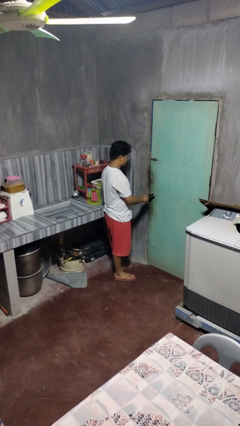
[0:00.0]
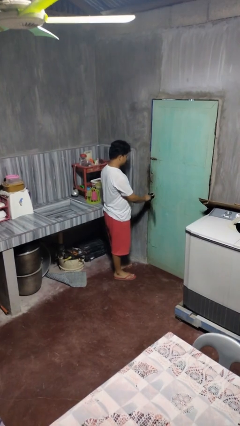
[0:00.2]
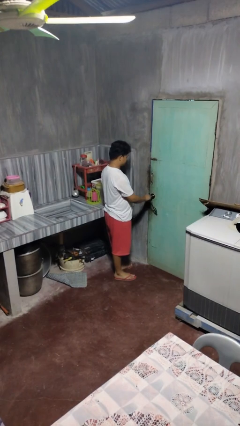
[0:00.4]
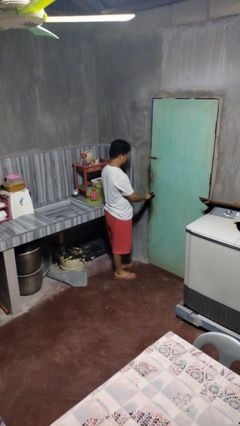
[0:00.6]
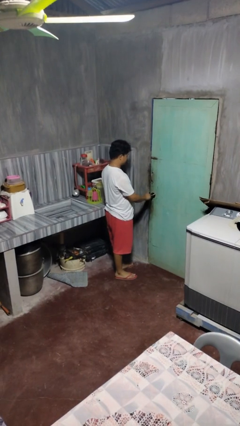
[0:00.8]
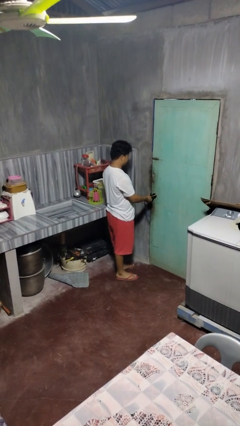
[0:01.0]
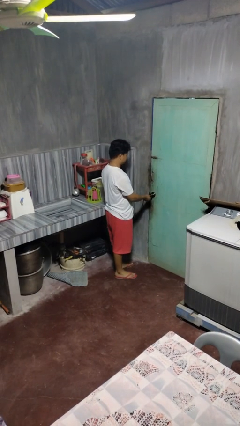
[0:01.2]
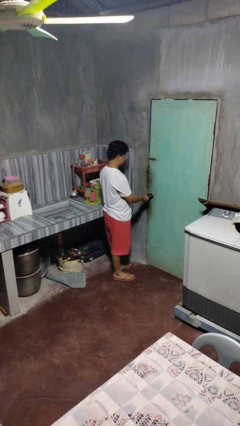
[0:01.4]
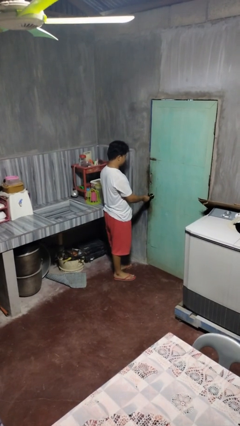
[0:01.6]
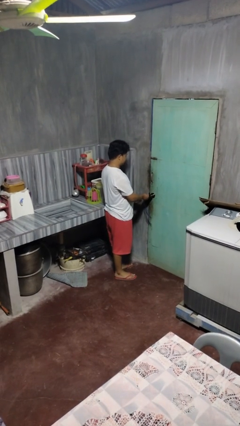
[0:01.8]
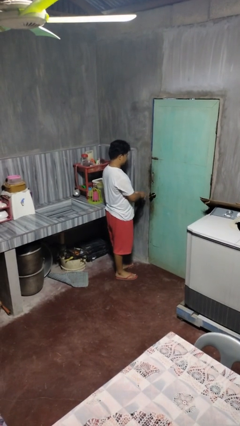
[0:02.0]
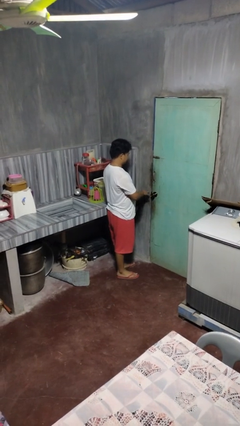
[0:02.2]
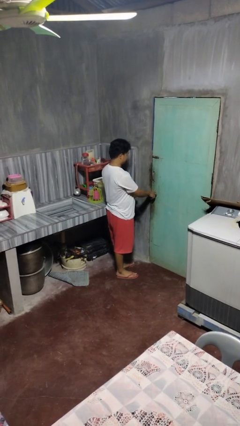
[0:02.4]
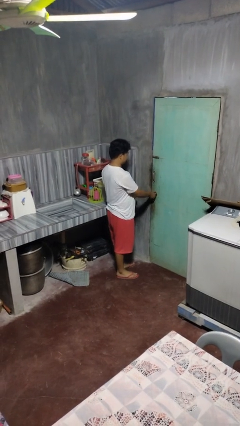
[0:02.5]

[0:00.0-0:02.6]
person unlocks door with keys

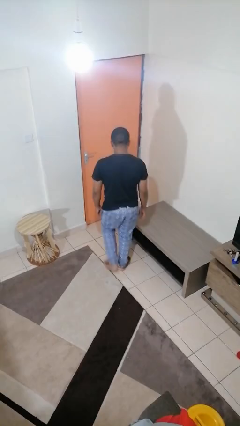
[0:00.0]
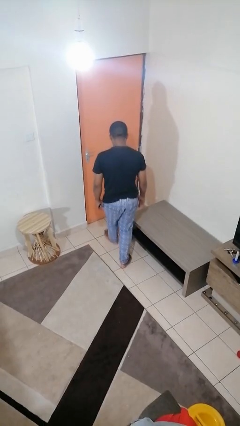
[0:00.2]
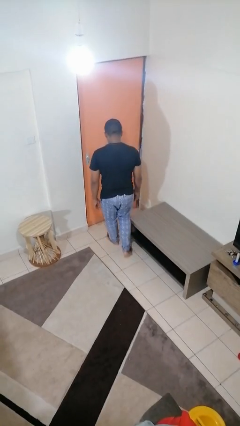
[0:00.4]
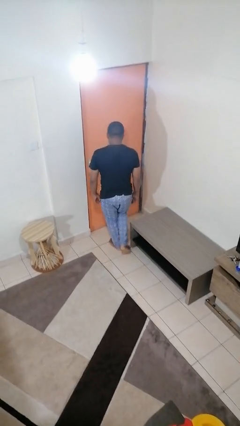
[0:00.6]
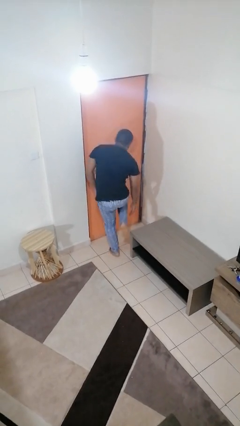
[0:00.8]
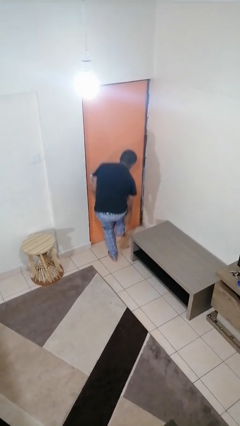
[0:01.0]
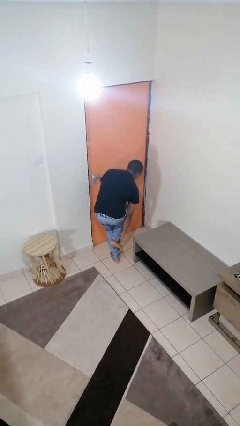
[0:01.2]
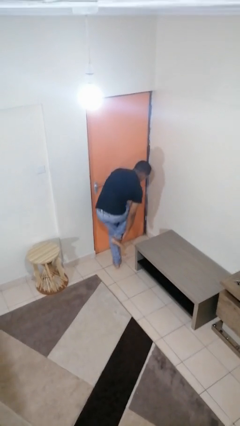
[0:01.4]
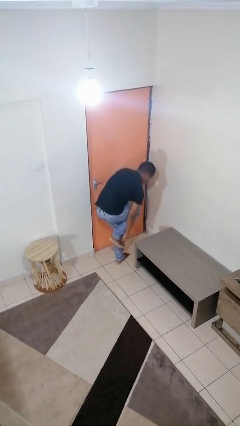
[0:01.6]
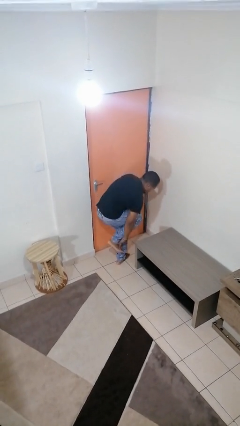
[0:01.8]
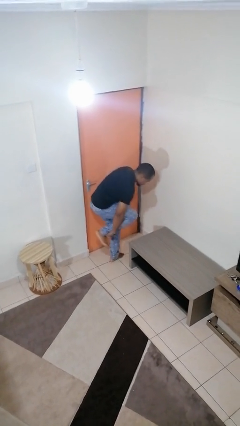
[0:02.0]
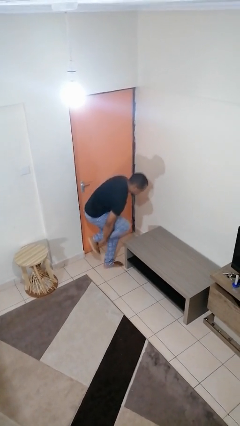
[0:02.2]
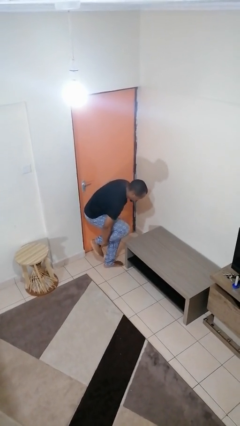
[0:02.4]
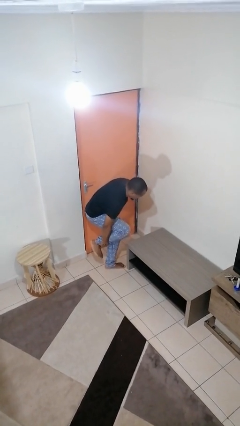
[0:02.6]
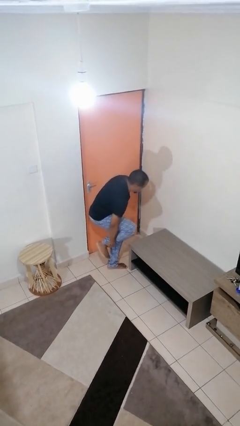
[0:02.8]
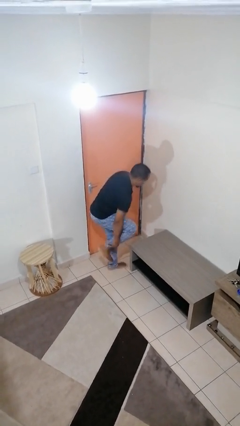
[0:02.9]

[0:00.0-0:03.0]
person stubs toe

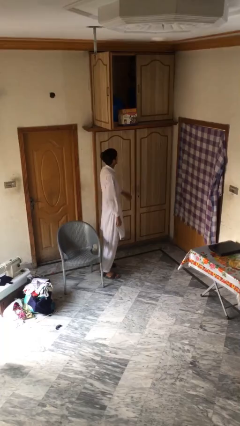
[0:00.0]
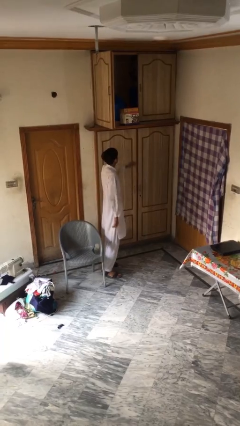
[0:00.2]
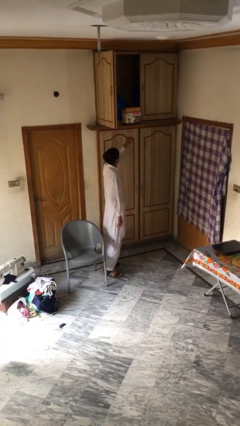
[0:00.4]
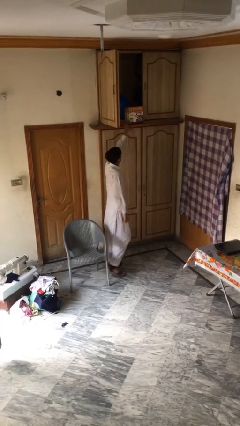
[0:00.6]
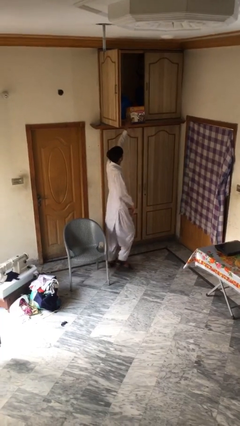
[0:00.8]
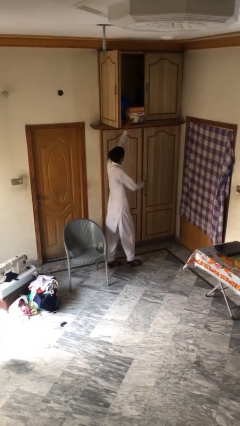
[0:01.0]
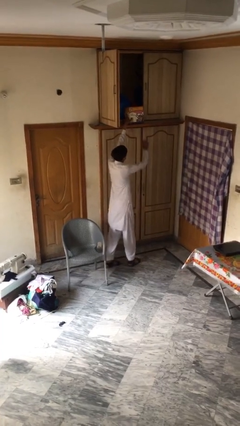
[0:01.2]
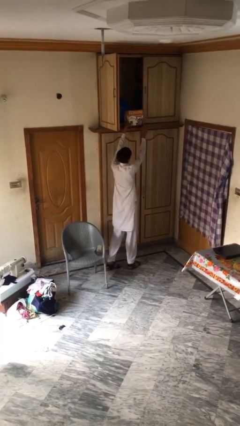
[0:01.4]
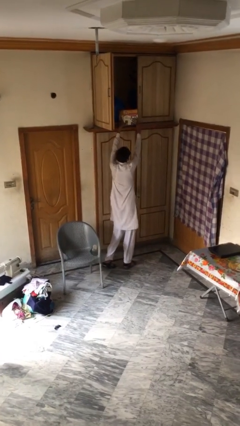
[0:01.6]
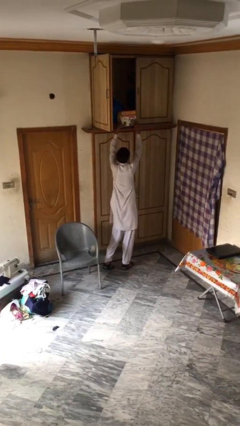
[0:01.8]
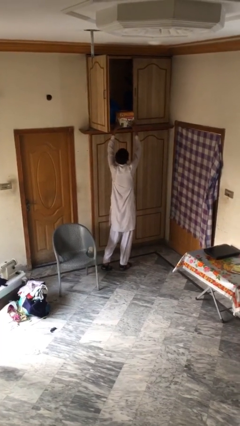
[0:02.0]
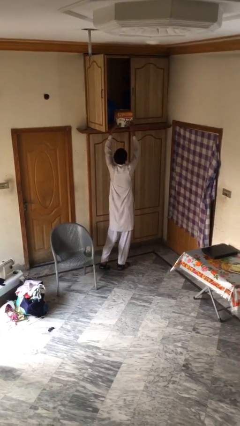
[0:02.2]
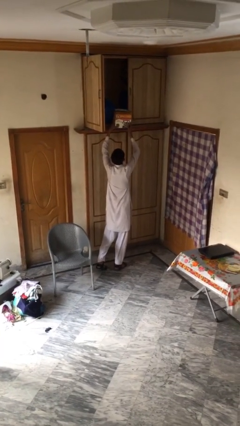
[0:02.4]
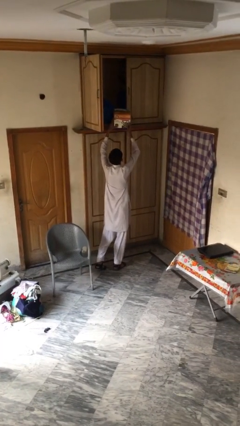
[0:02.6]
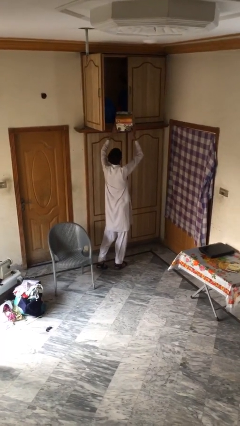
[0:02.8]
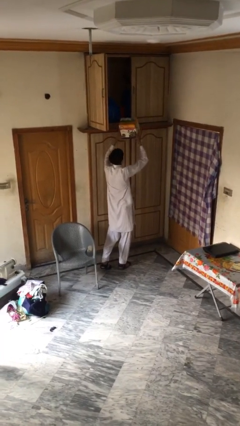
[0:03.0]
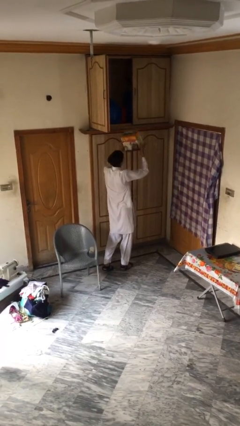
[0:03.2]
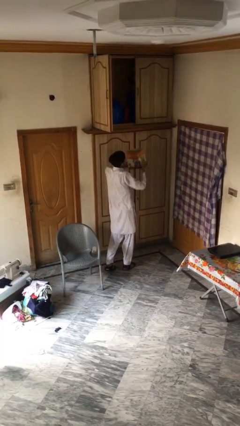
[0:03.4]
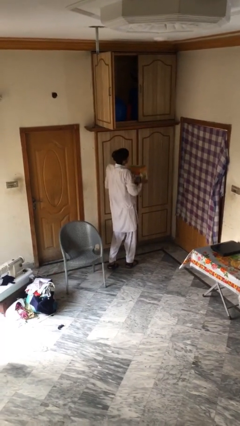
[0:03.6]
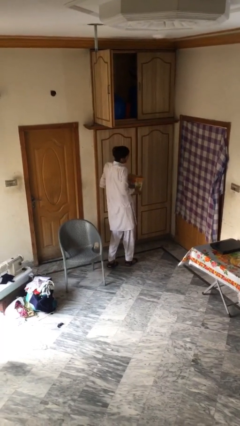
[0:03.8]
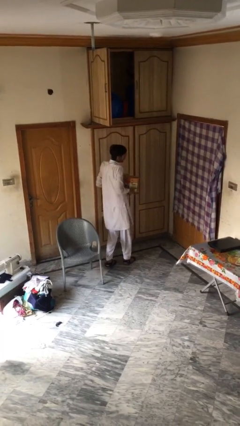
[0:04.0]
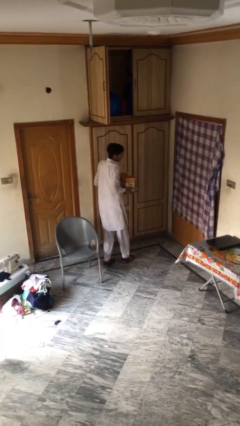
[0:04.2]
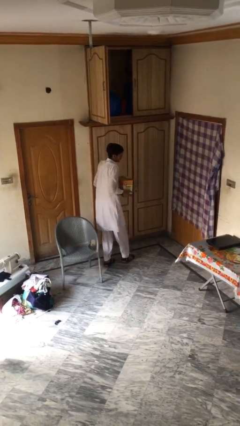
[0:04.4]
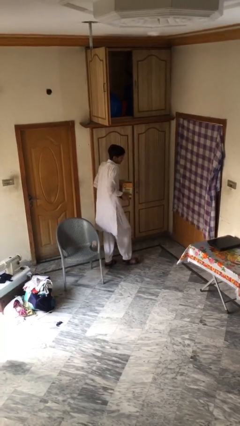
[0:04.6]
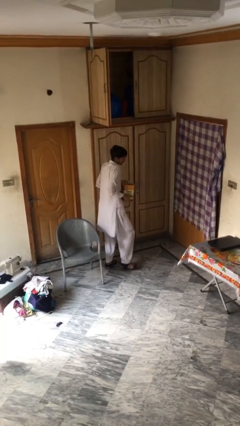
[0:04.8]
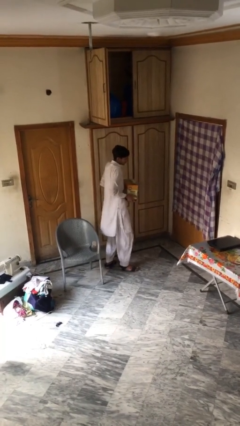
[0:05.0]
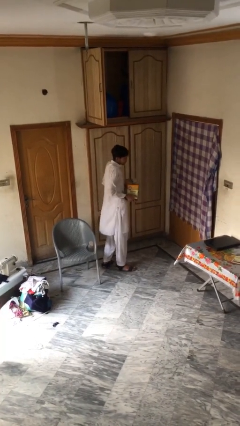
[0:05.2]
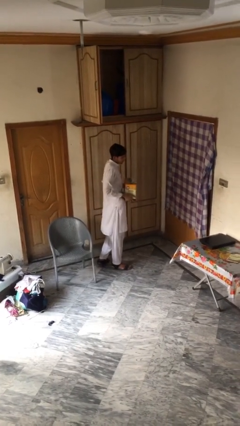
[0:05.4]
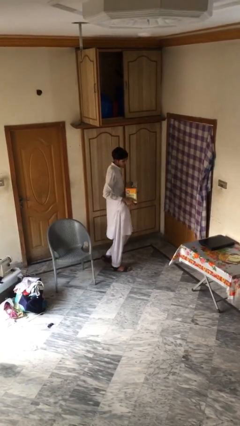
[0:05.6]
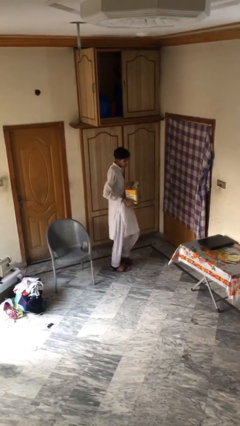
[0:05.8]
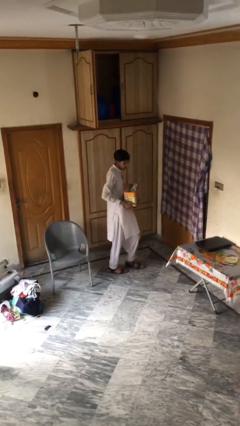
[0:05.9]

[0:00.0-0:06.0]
person picks up object from shelf

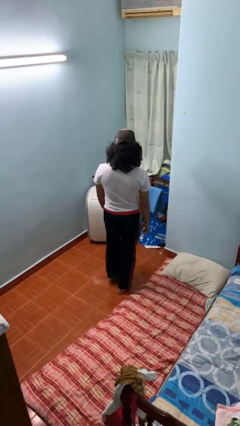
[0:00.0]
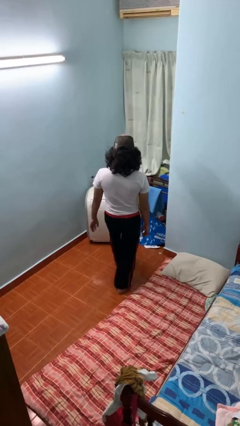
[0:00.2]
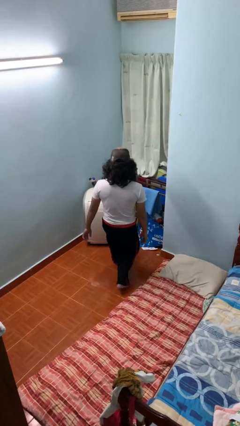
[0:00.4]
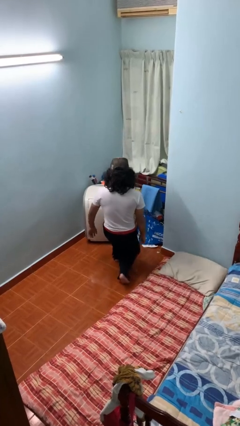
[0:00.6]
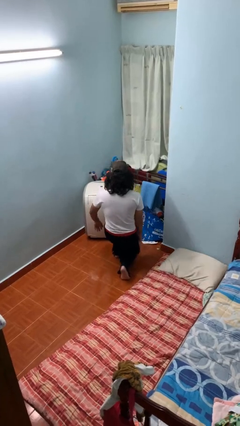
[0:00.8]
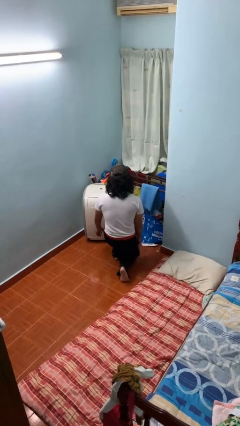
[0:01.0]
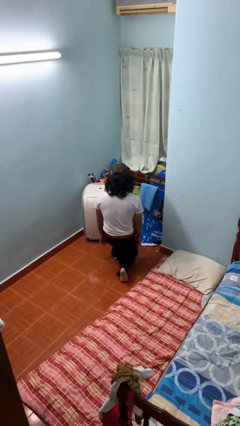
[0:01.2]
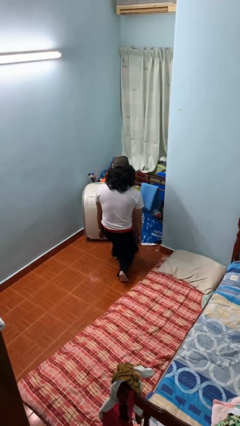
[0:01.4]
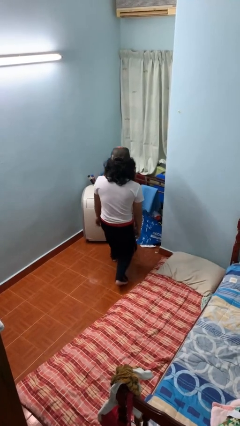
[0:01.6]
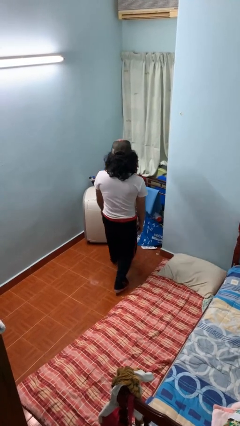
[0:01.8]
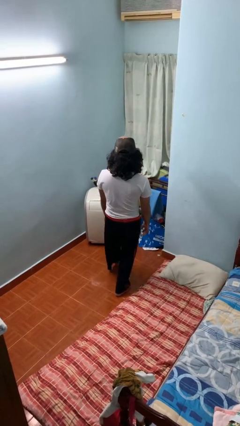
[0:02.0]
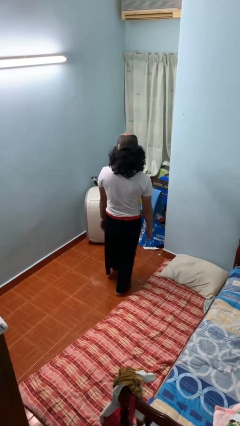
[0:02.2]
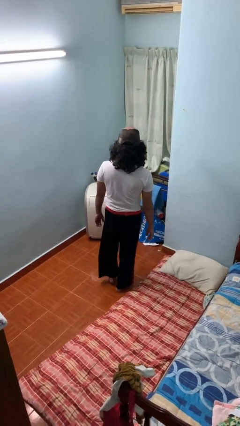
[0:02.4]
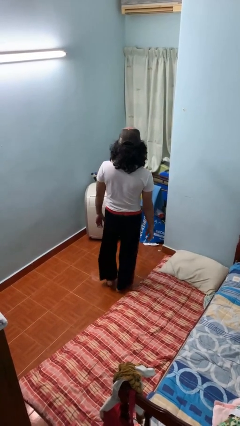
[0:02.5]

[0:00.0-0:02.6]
person exercises with lunges

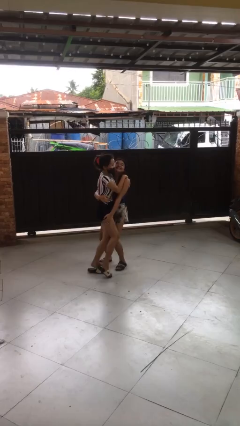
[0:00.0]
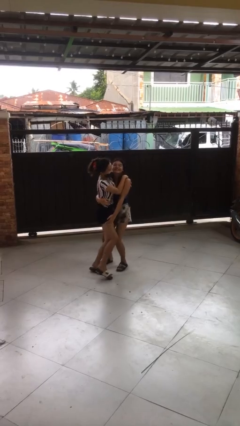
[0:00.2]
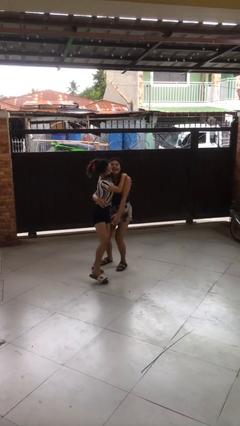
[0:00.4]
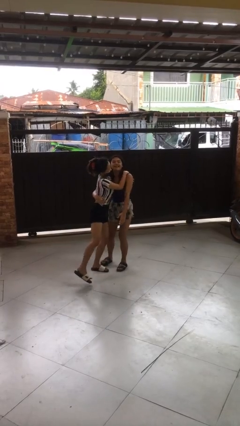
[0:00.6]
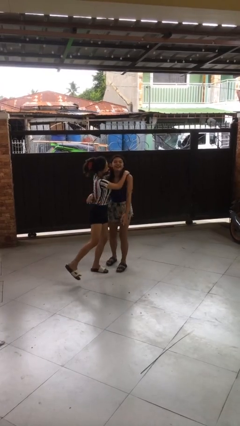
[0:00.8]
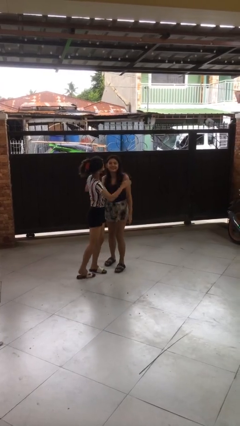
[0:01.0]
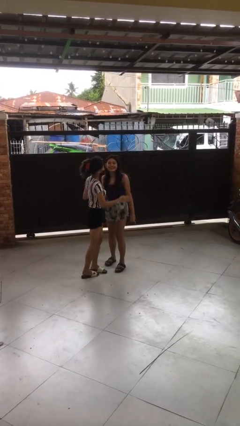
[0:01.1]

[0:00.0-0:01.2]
person puts down person

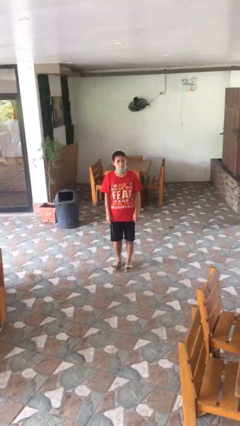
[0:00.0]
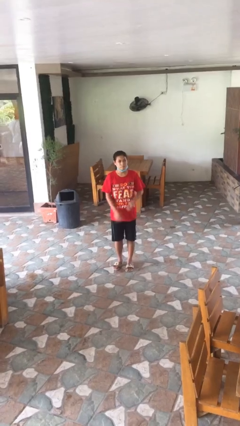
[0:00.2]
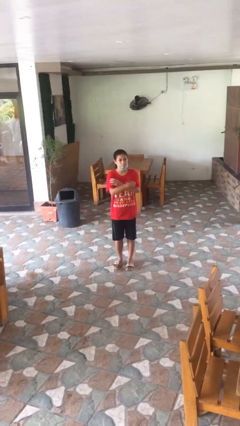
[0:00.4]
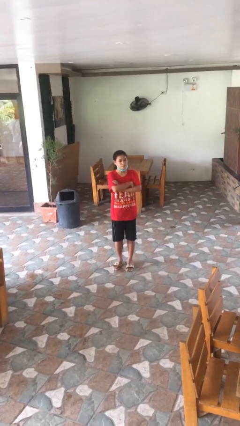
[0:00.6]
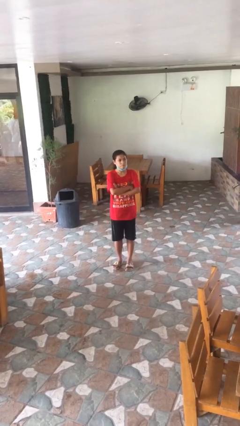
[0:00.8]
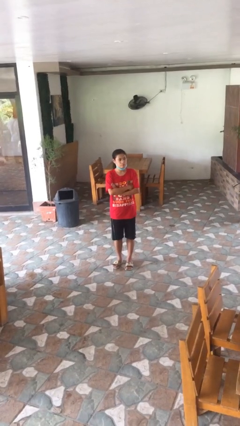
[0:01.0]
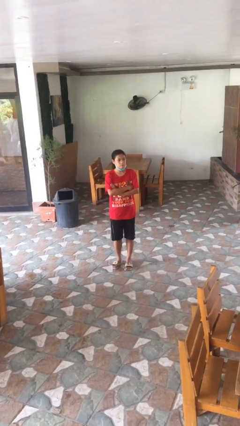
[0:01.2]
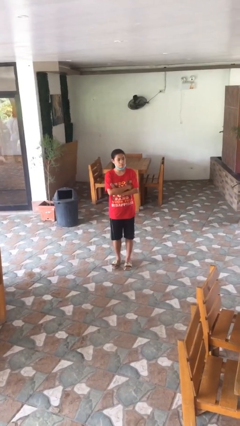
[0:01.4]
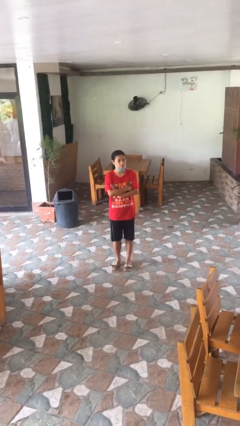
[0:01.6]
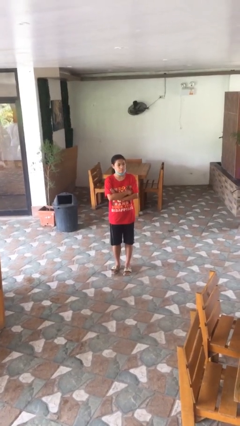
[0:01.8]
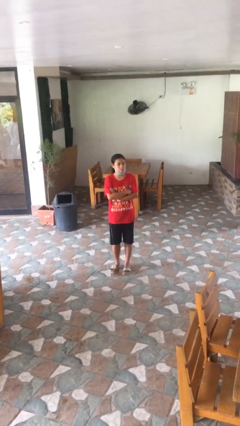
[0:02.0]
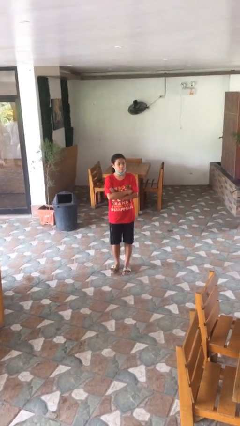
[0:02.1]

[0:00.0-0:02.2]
person crosses arms
